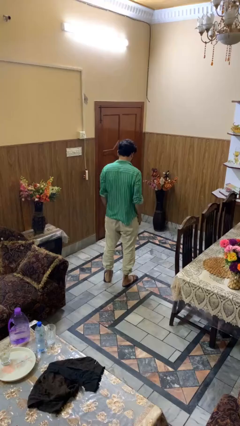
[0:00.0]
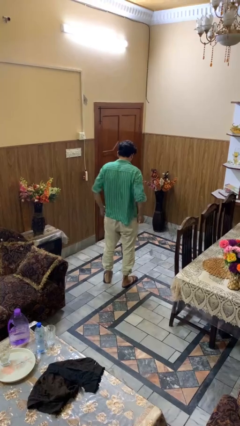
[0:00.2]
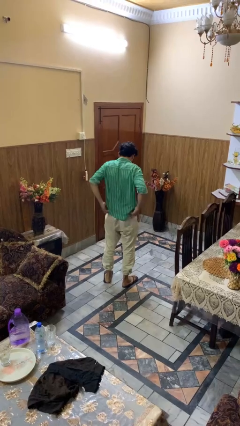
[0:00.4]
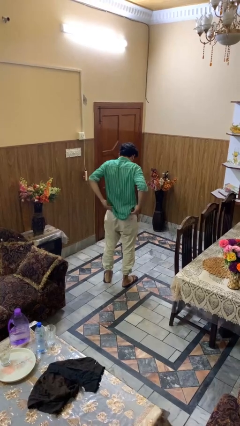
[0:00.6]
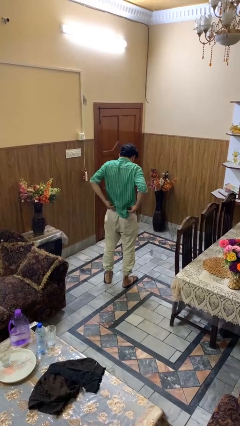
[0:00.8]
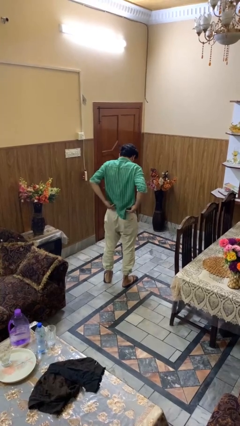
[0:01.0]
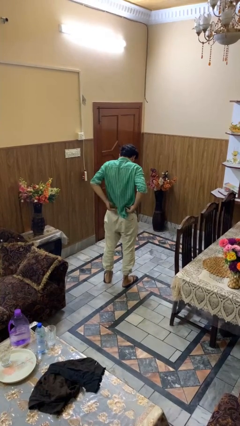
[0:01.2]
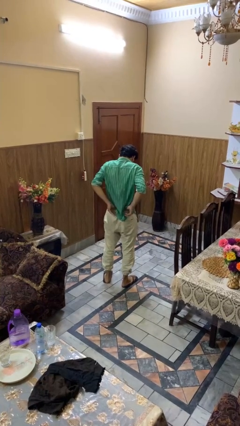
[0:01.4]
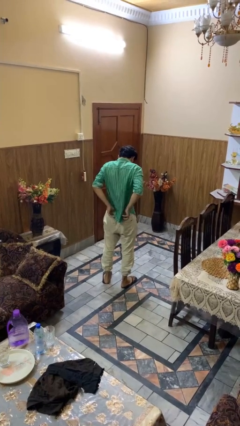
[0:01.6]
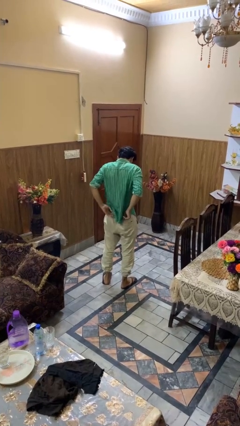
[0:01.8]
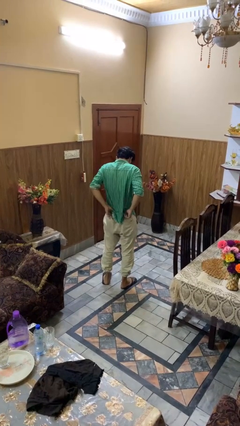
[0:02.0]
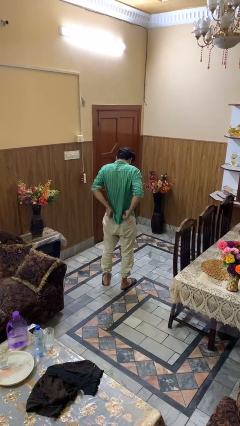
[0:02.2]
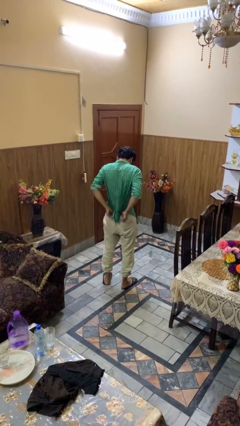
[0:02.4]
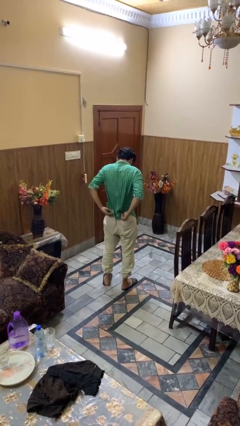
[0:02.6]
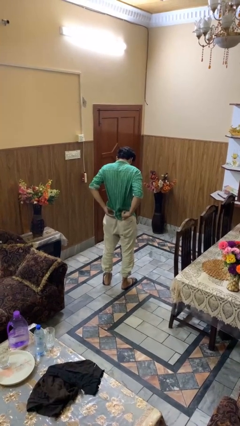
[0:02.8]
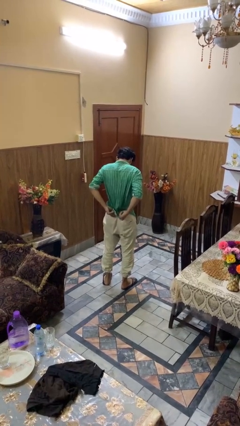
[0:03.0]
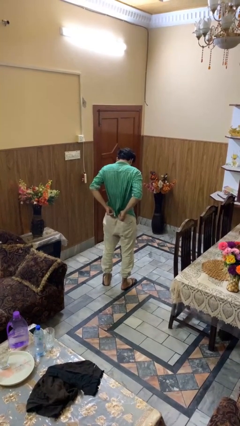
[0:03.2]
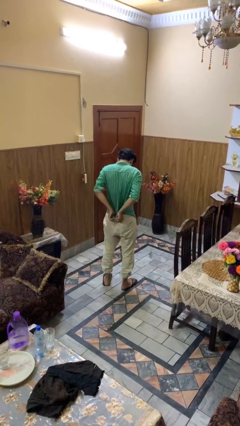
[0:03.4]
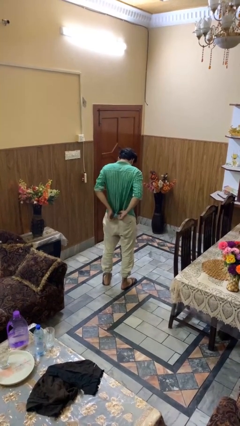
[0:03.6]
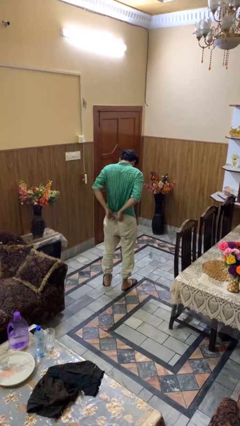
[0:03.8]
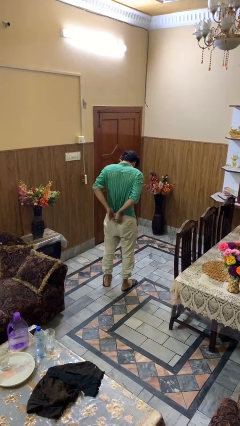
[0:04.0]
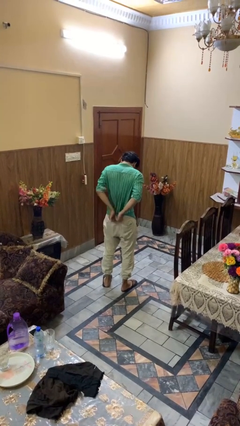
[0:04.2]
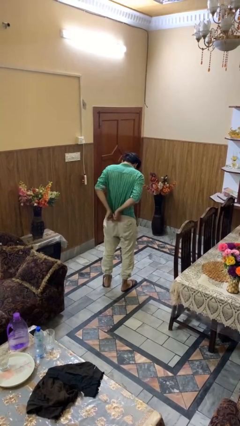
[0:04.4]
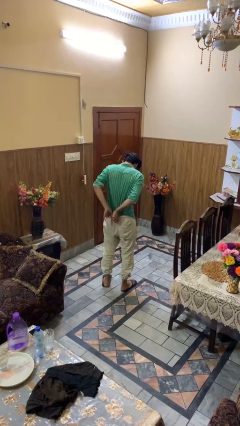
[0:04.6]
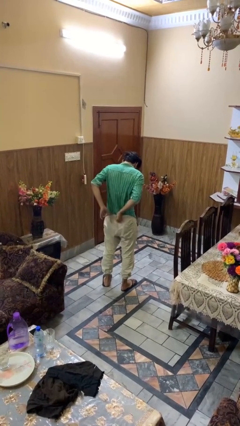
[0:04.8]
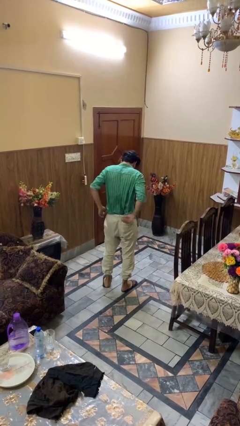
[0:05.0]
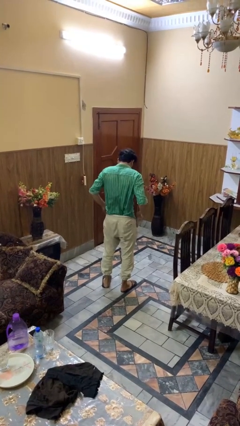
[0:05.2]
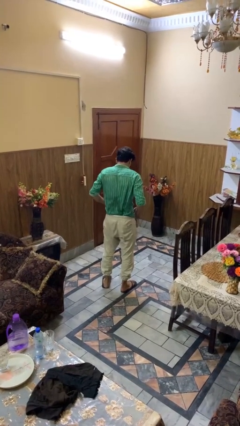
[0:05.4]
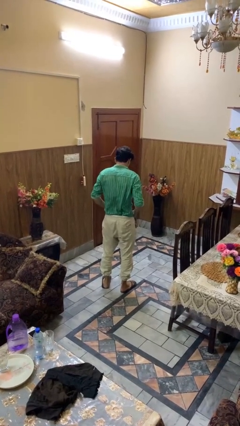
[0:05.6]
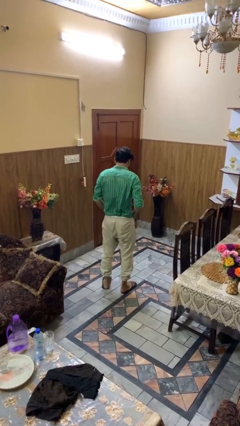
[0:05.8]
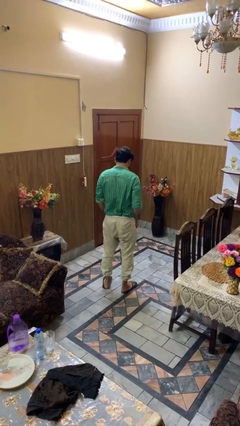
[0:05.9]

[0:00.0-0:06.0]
person tucks in shirt

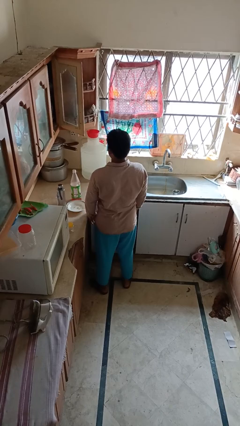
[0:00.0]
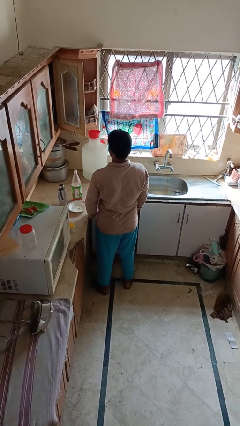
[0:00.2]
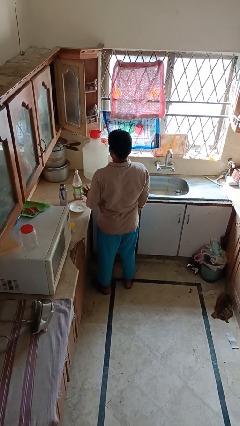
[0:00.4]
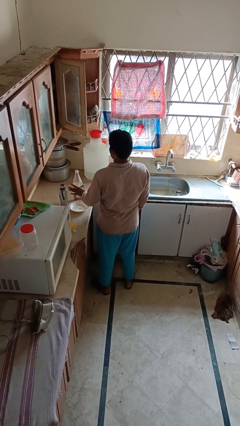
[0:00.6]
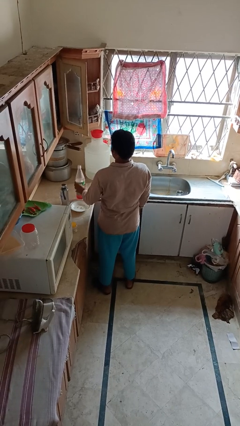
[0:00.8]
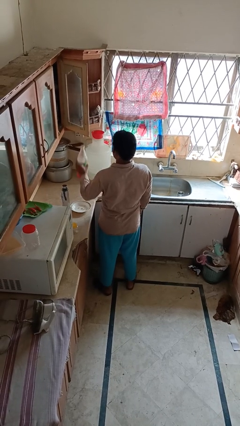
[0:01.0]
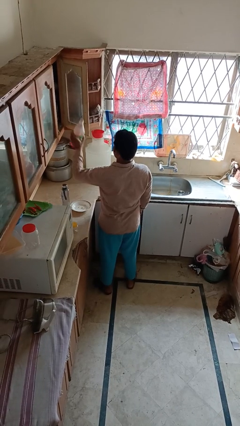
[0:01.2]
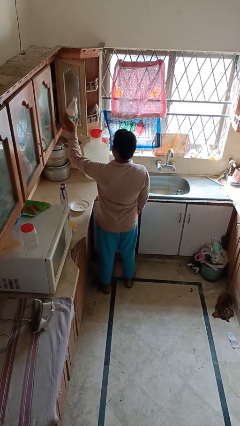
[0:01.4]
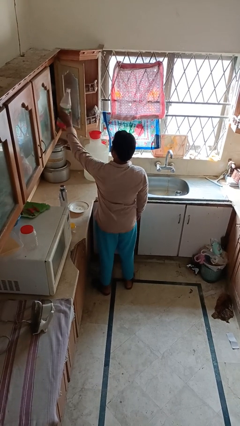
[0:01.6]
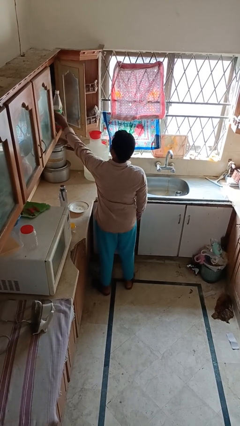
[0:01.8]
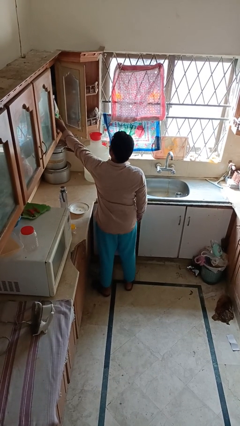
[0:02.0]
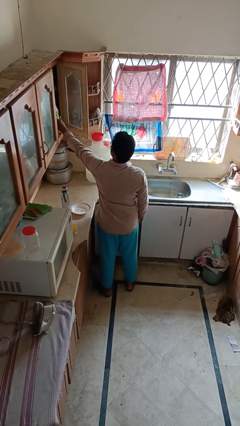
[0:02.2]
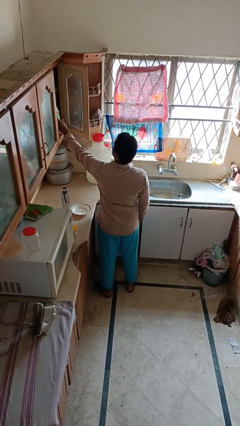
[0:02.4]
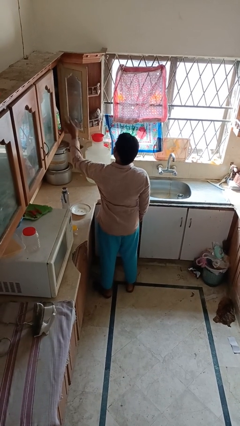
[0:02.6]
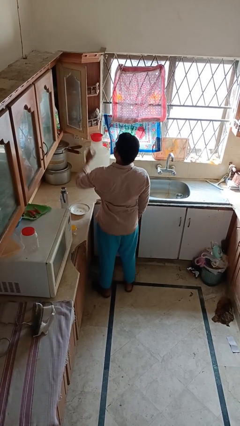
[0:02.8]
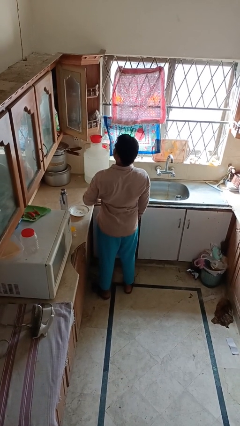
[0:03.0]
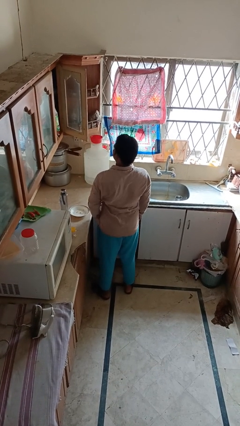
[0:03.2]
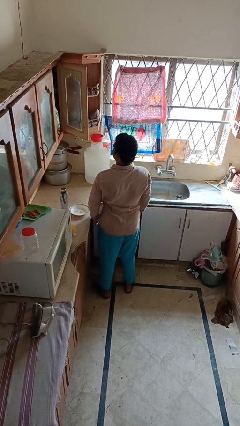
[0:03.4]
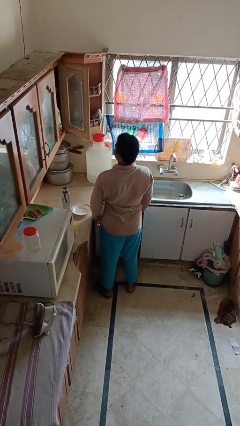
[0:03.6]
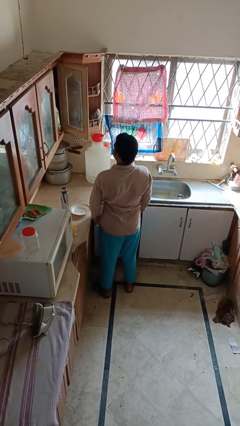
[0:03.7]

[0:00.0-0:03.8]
person puts object in cabinet

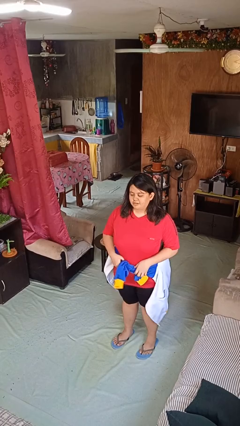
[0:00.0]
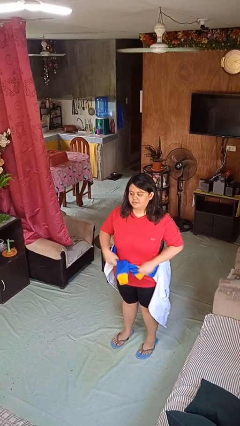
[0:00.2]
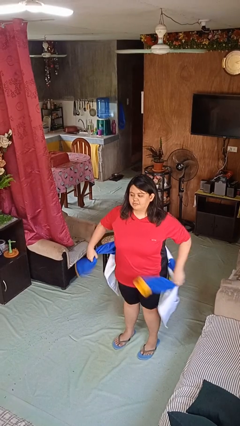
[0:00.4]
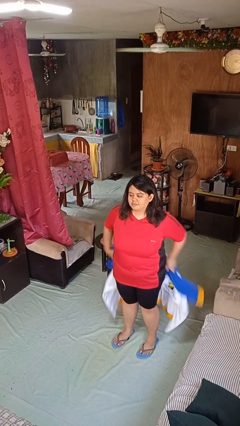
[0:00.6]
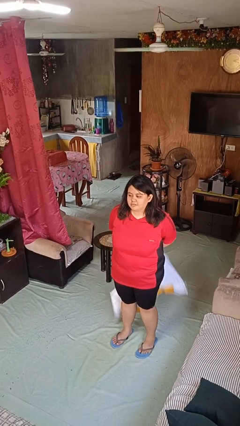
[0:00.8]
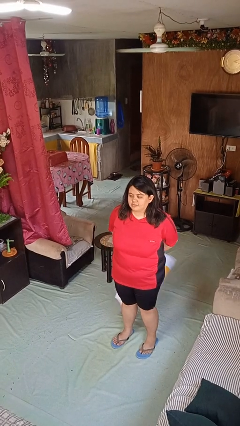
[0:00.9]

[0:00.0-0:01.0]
person unties jacket around waist

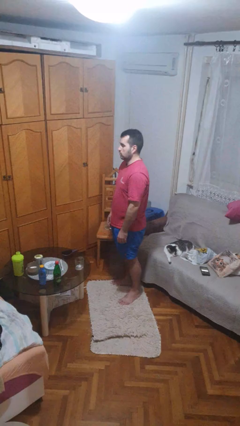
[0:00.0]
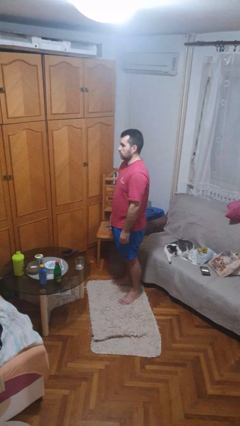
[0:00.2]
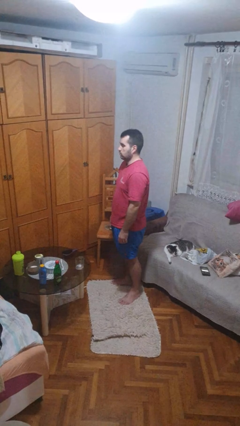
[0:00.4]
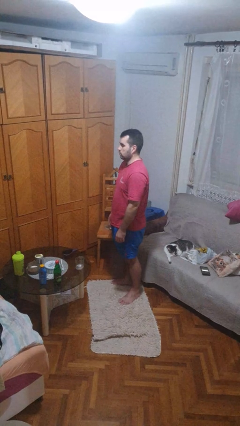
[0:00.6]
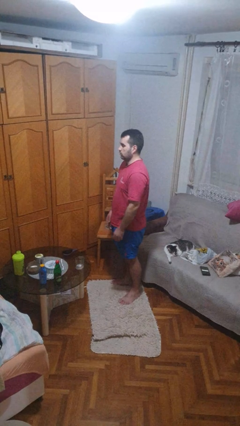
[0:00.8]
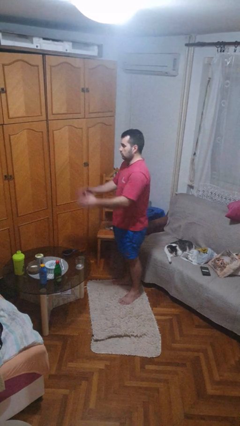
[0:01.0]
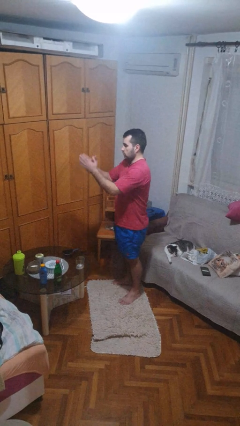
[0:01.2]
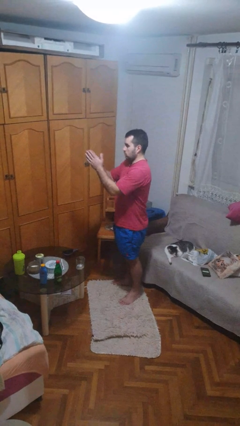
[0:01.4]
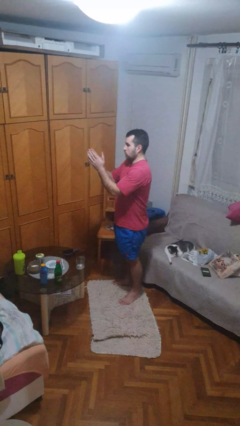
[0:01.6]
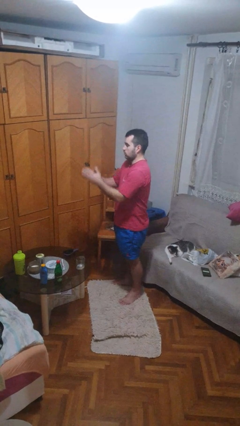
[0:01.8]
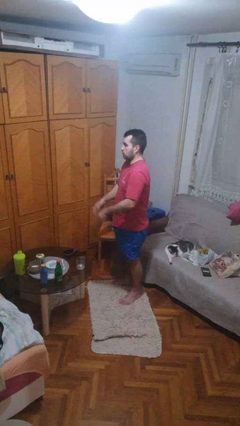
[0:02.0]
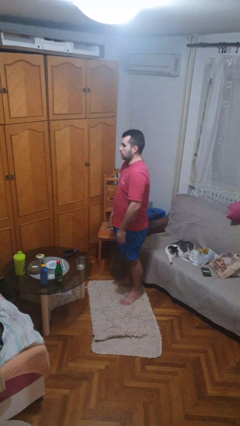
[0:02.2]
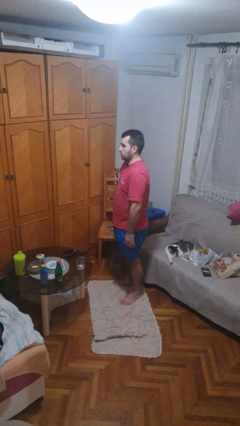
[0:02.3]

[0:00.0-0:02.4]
person claps hands

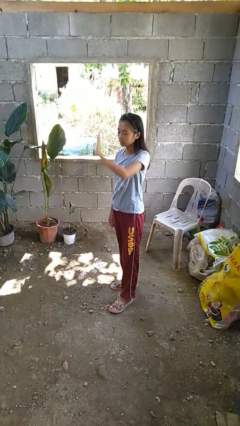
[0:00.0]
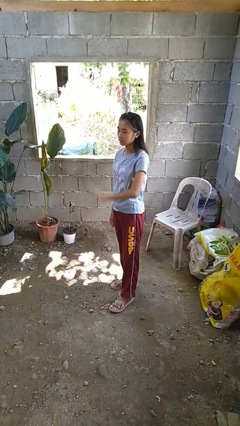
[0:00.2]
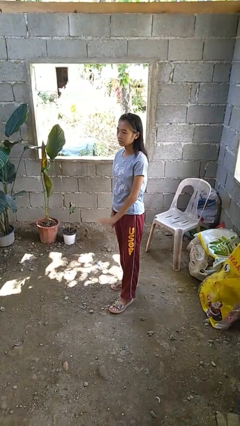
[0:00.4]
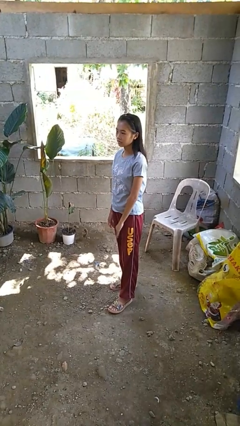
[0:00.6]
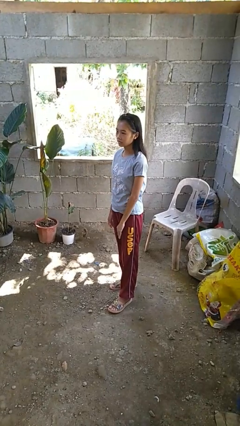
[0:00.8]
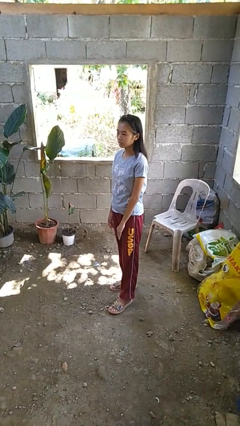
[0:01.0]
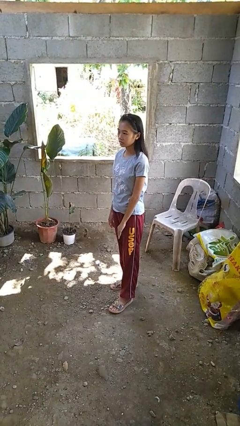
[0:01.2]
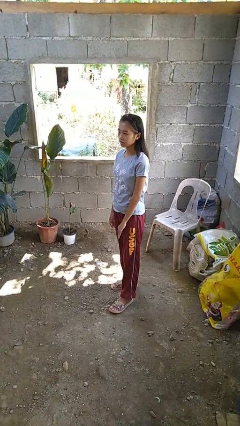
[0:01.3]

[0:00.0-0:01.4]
person gestures swipe down

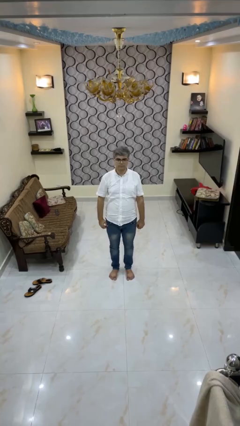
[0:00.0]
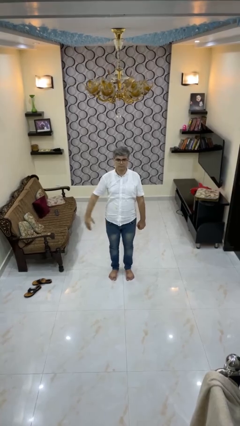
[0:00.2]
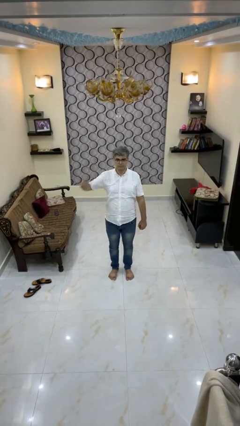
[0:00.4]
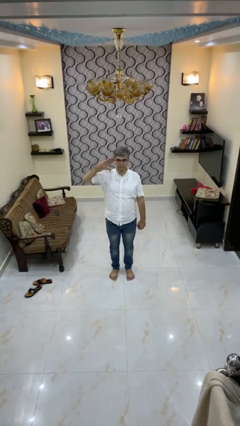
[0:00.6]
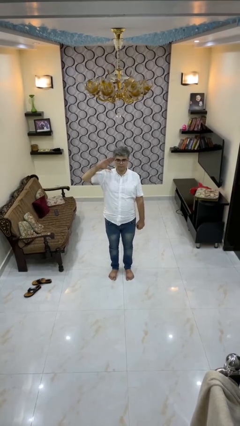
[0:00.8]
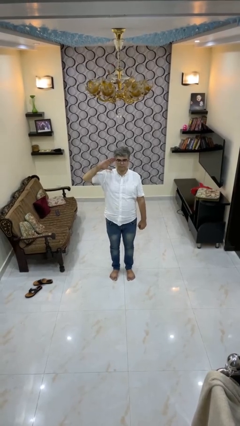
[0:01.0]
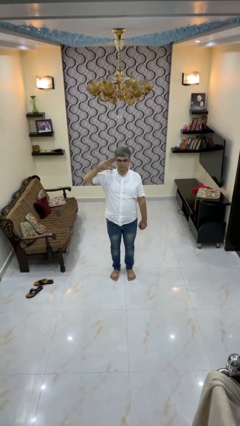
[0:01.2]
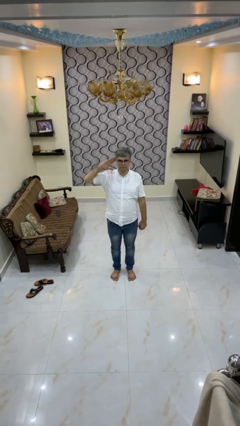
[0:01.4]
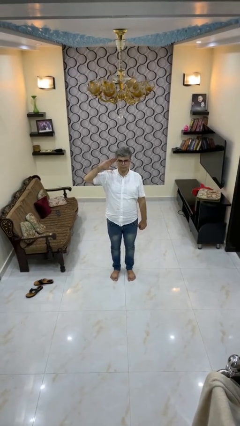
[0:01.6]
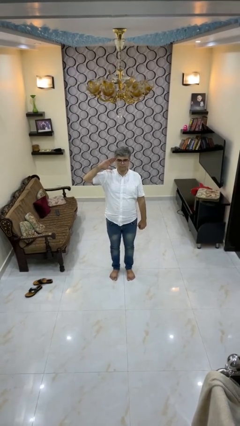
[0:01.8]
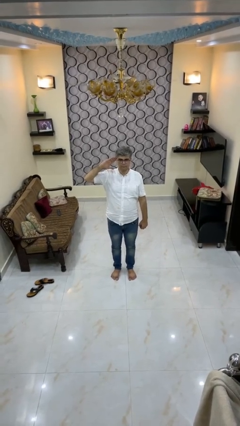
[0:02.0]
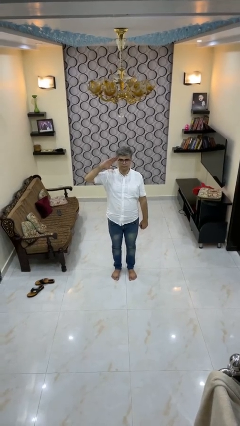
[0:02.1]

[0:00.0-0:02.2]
person salutes

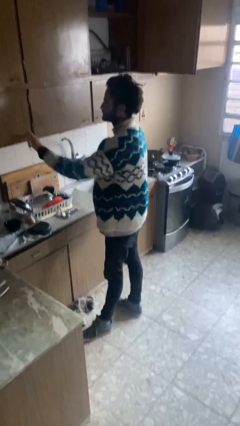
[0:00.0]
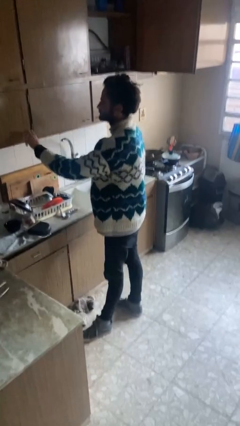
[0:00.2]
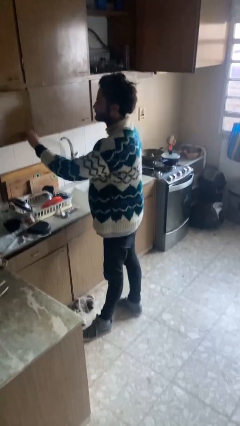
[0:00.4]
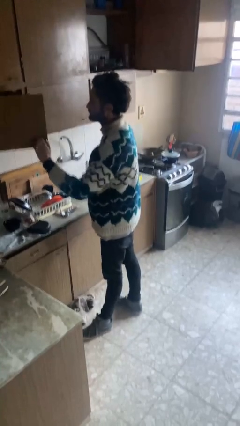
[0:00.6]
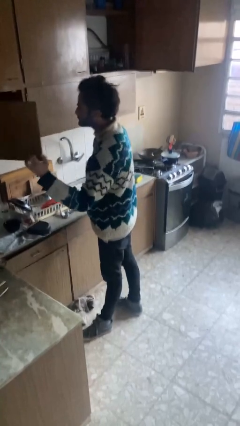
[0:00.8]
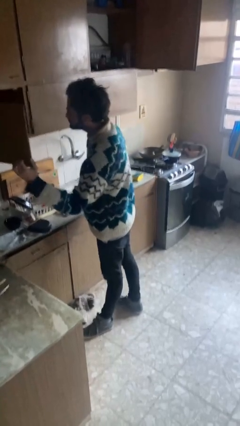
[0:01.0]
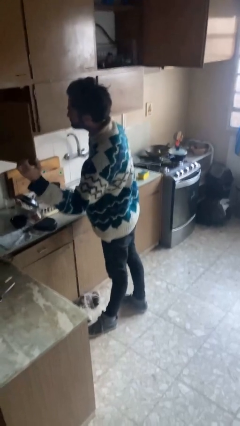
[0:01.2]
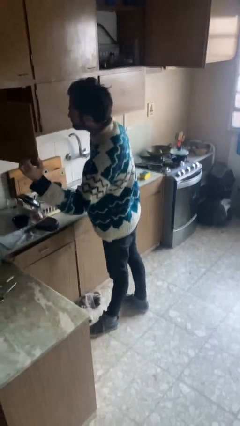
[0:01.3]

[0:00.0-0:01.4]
person opens cabinet
